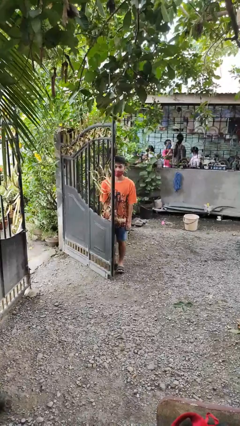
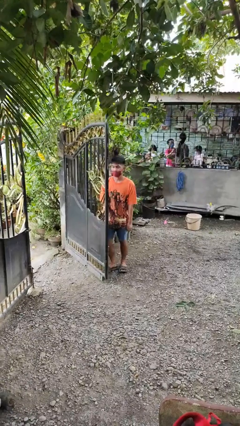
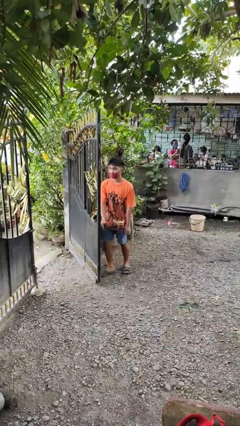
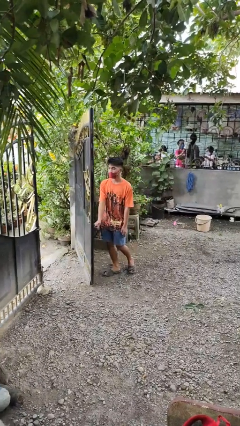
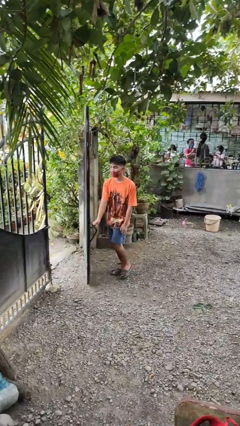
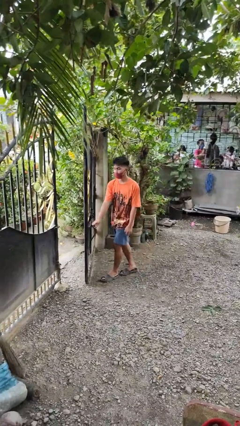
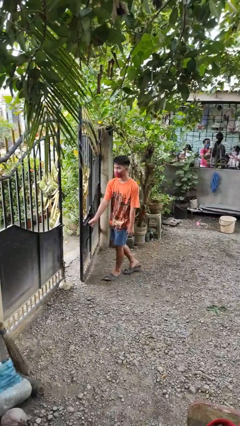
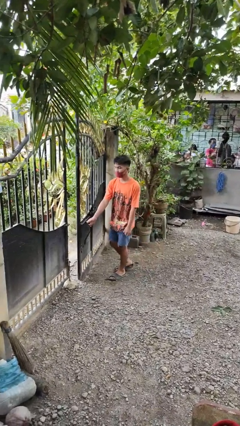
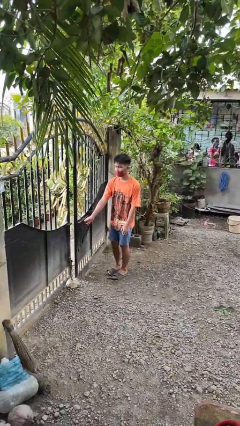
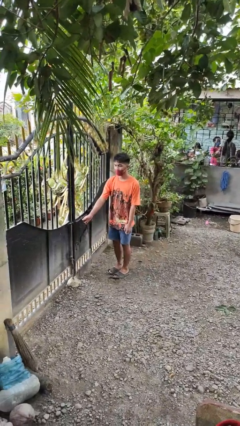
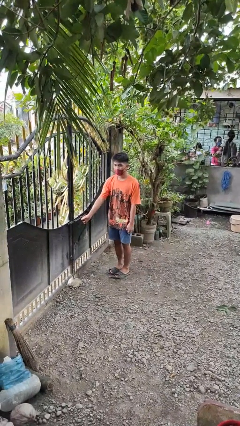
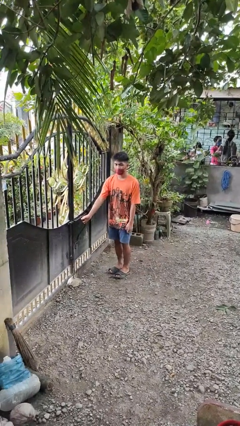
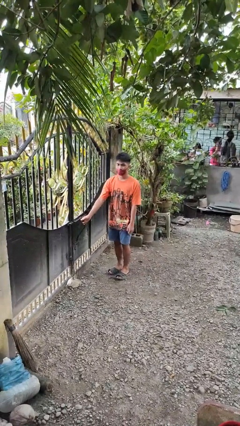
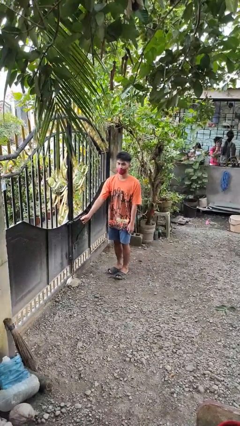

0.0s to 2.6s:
person closes gate

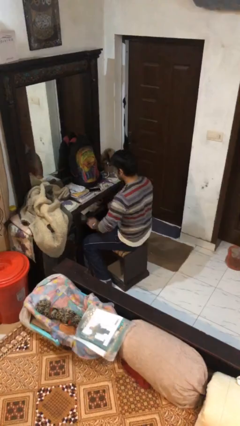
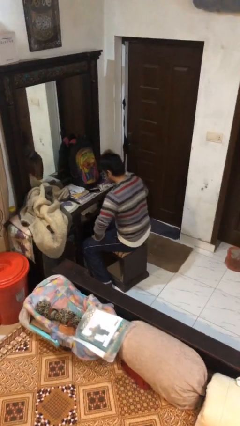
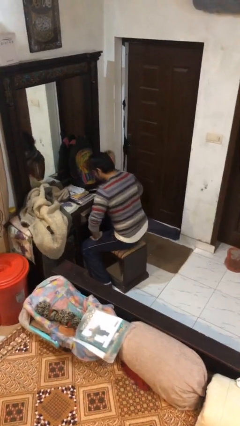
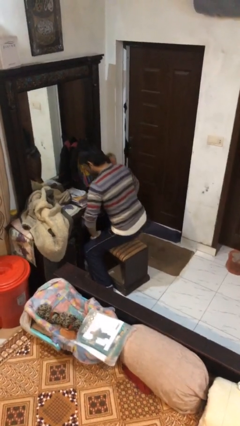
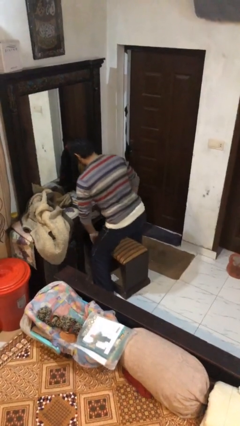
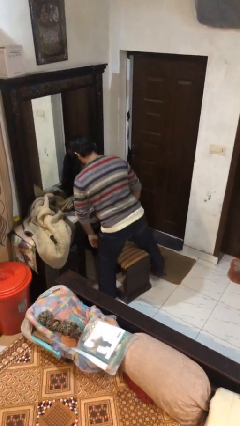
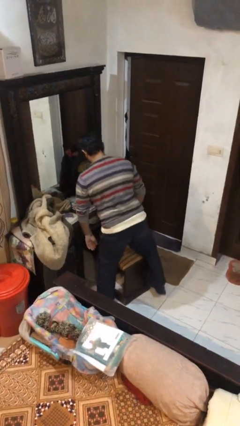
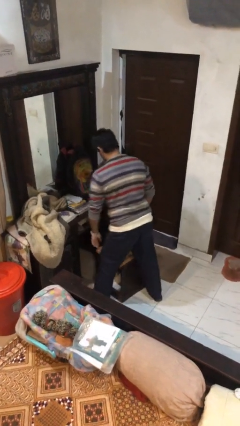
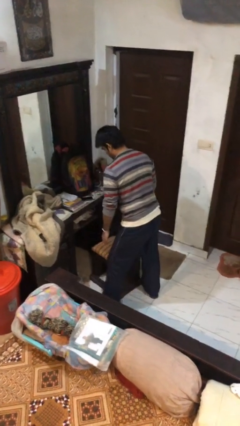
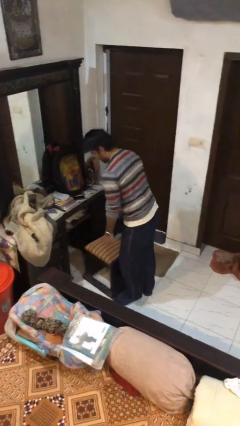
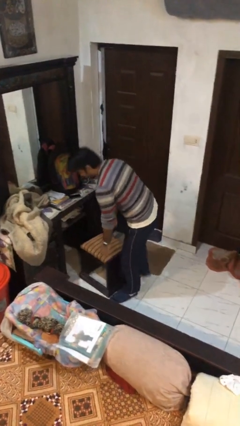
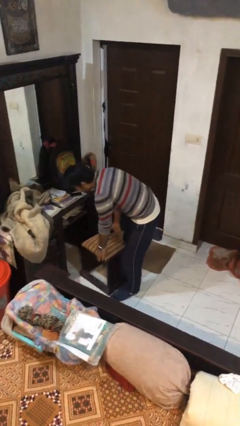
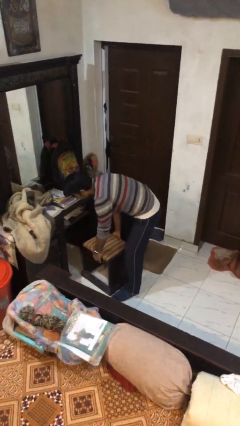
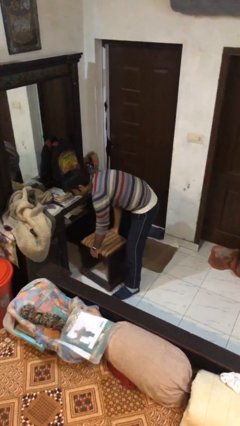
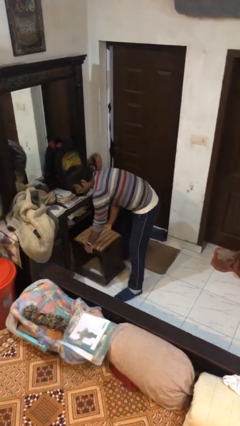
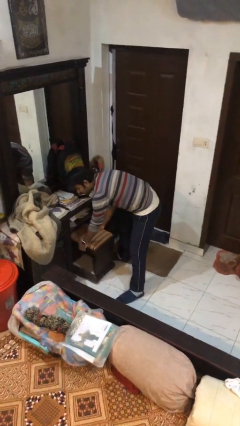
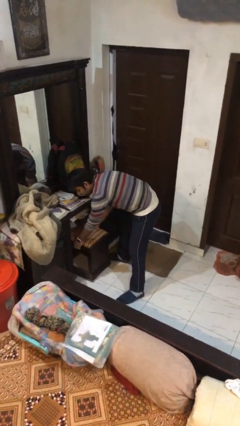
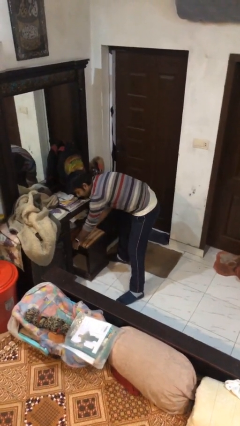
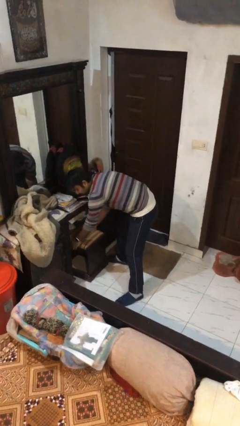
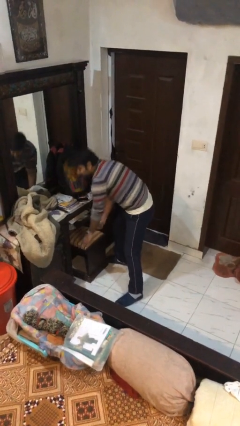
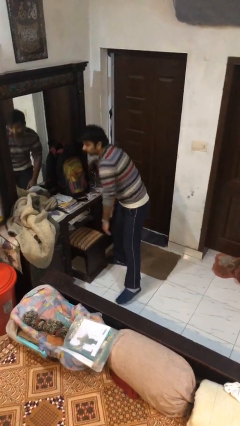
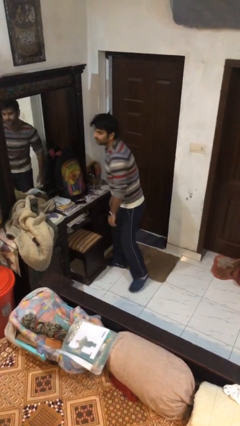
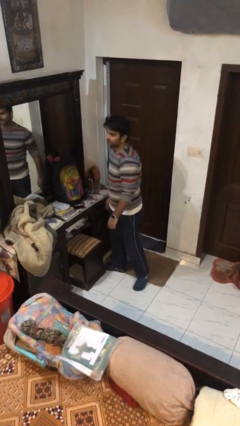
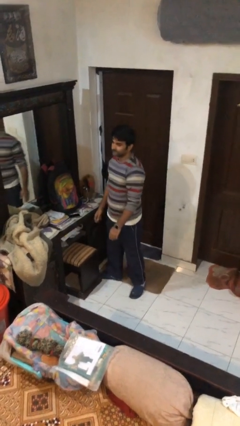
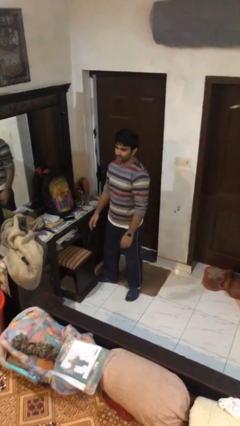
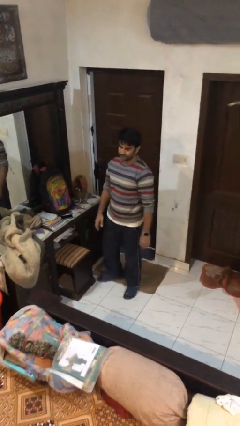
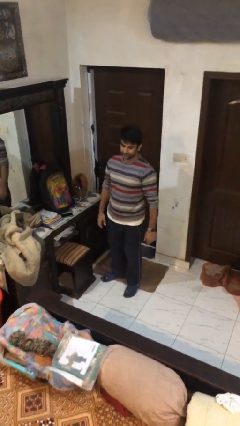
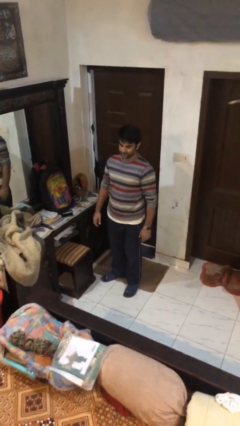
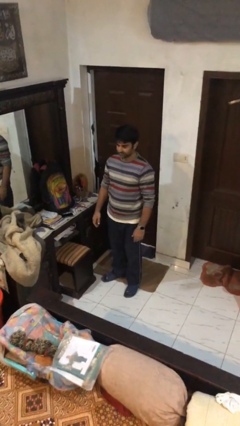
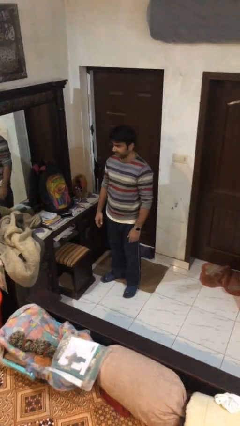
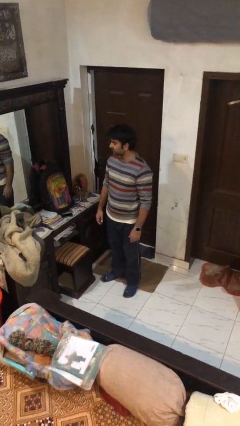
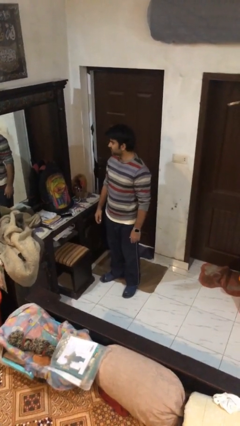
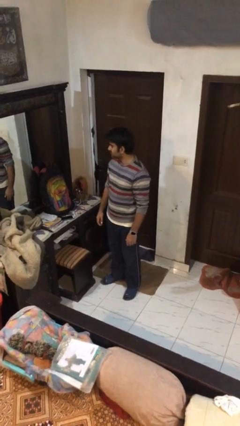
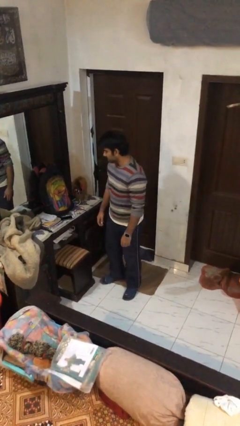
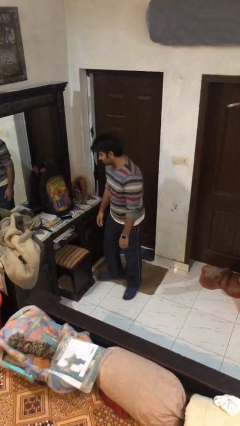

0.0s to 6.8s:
person stands up

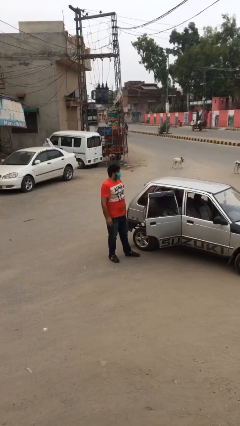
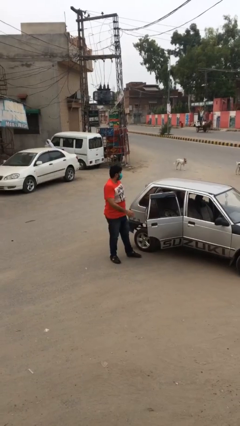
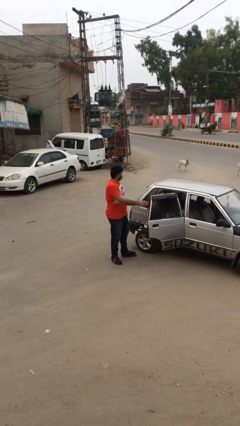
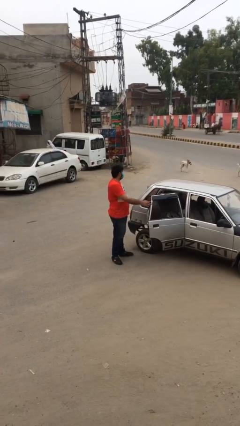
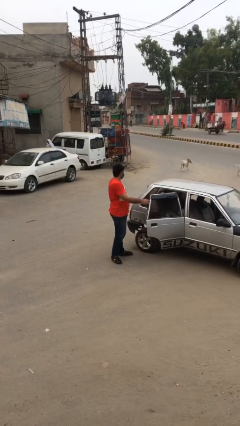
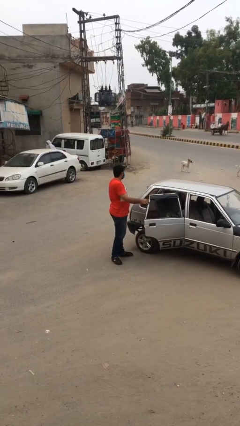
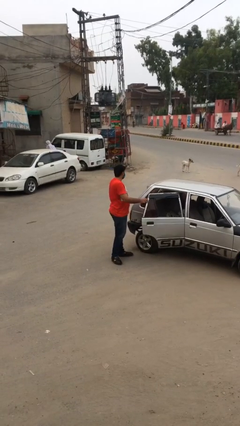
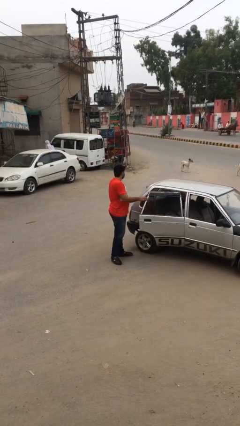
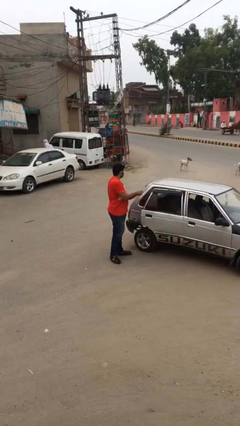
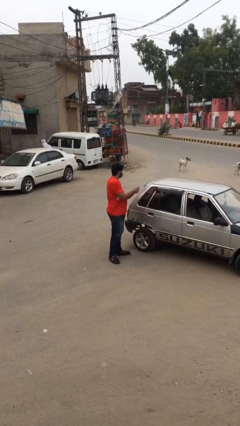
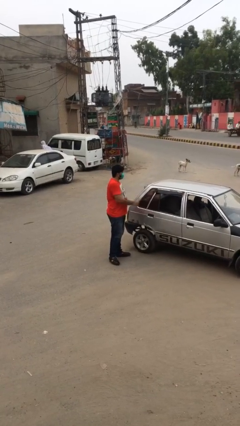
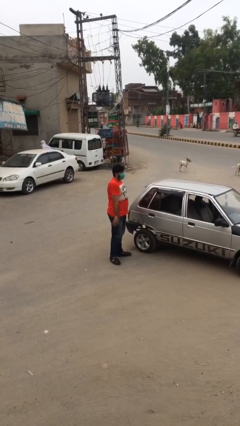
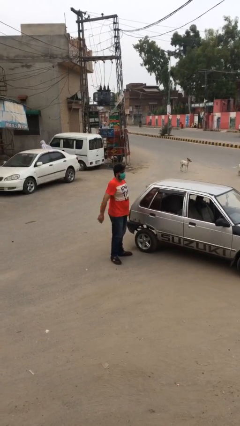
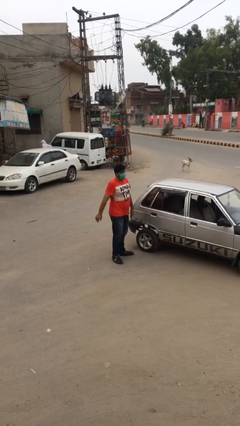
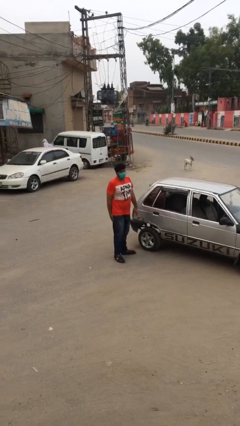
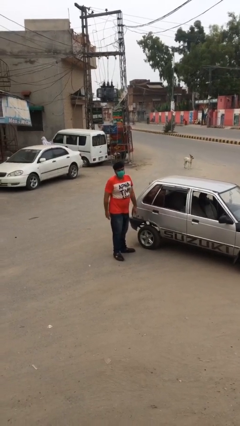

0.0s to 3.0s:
person closes car door

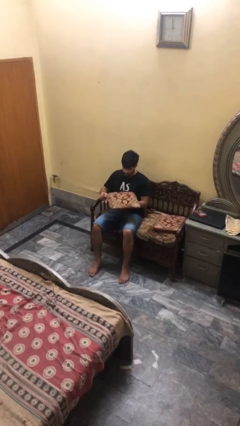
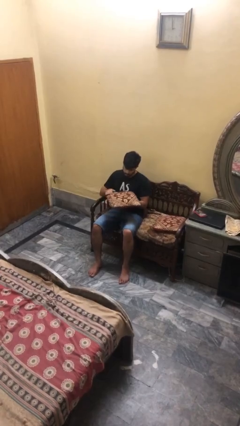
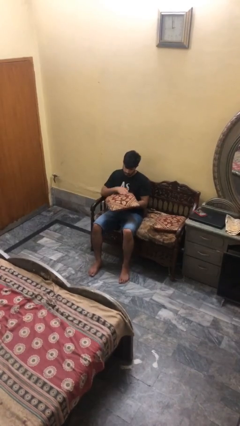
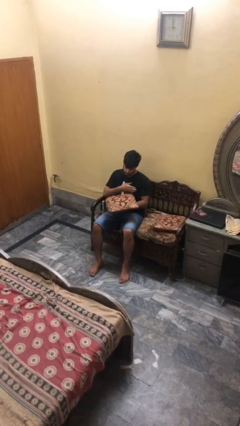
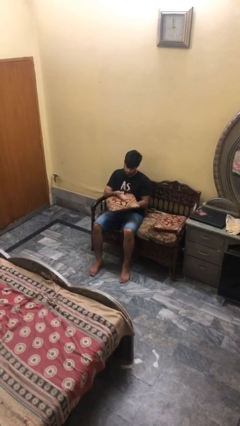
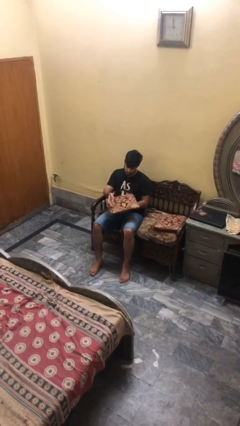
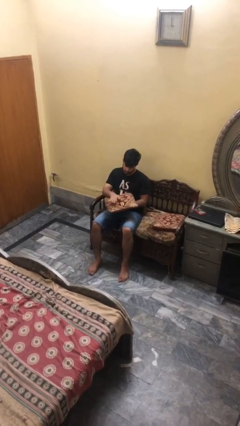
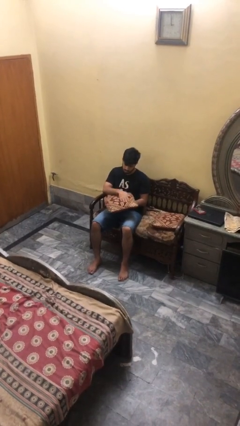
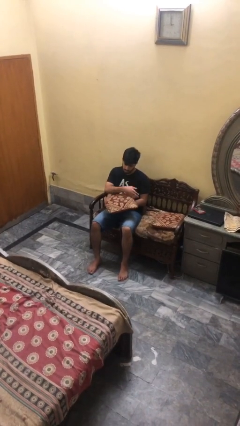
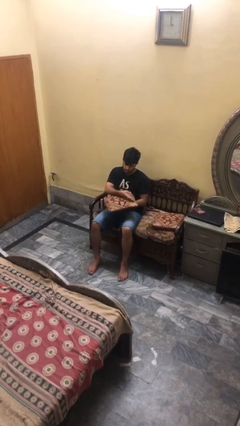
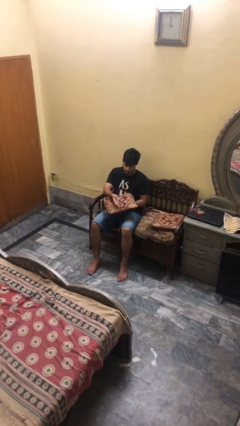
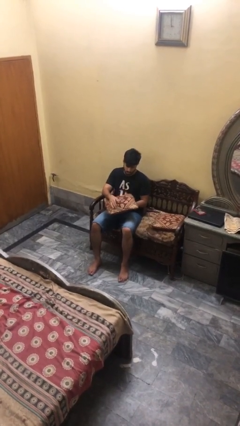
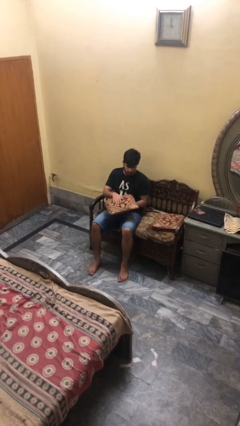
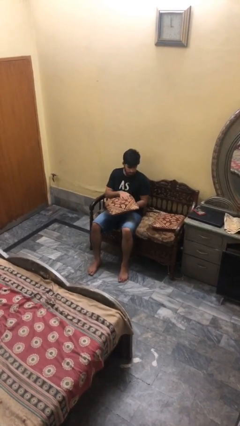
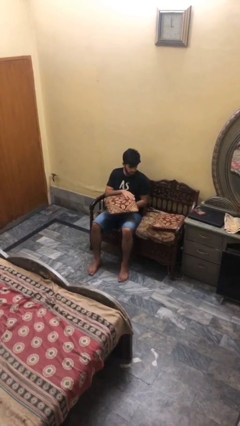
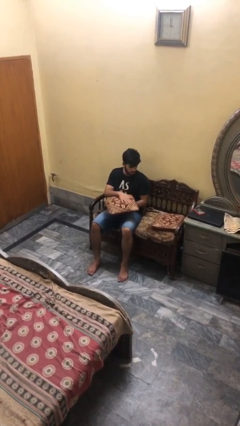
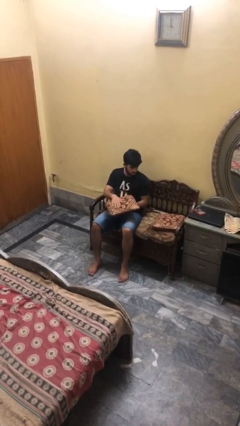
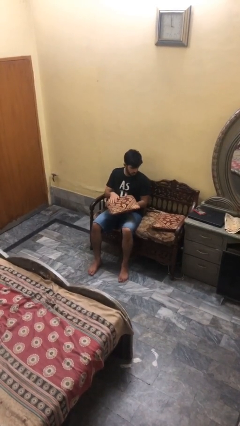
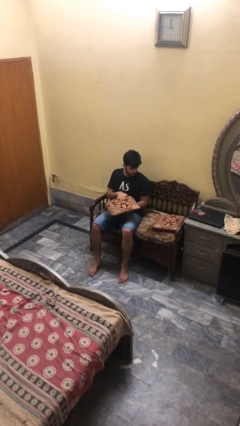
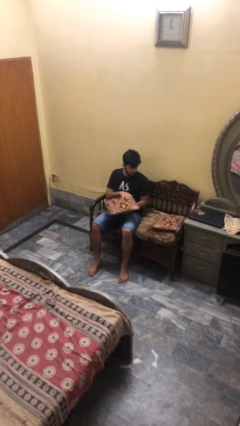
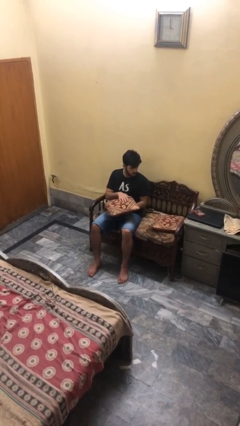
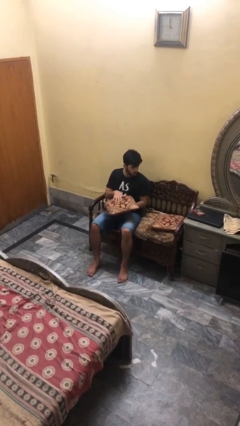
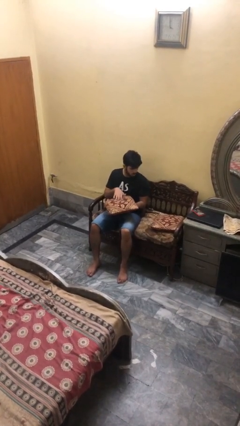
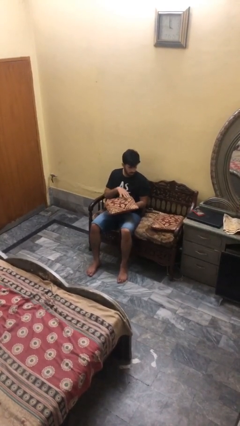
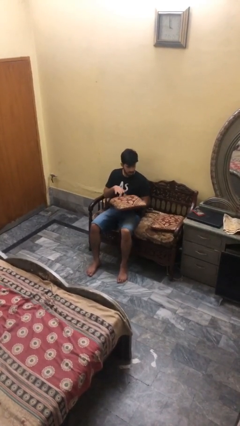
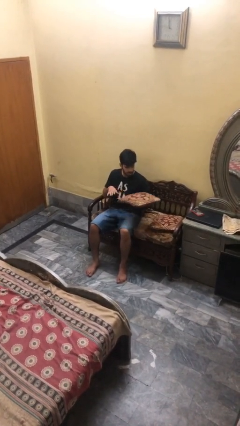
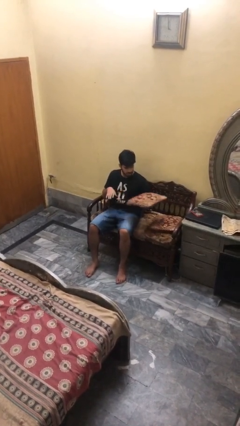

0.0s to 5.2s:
person waves hand over object

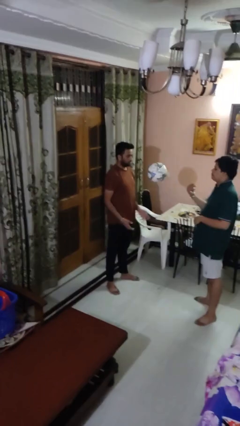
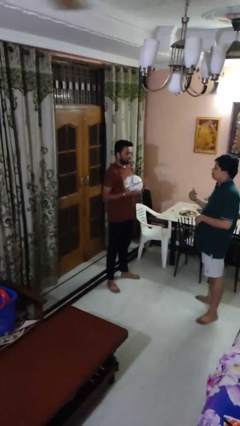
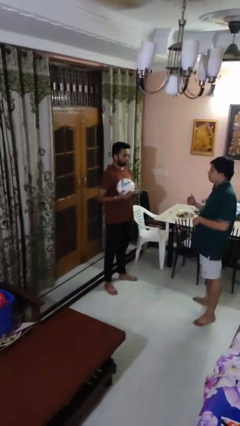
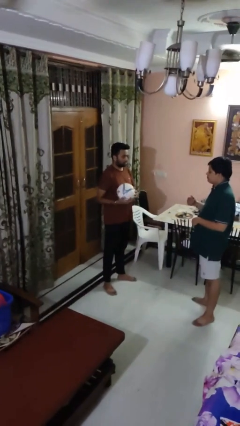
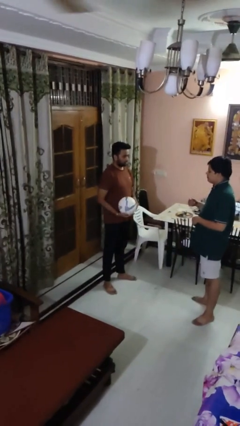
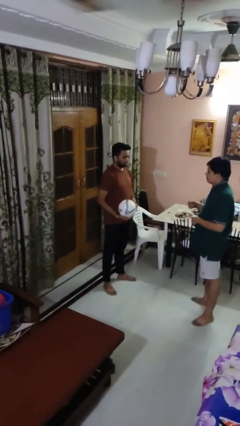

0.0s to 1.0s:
person catches object from person
